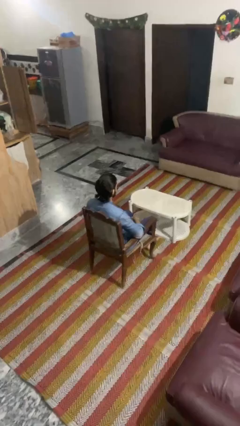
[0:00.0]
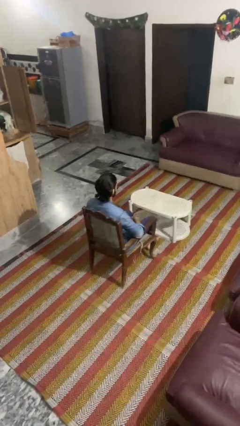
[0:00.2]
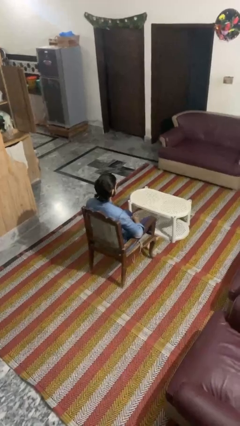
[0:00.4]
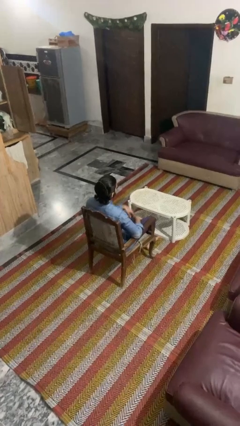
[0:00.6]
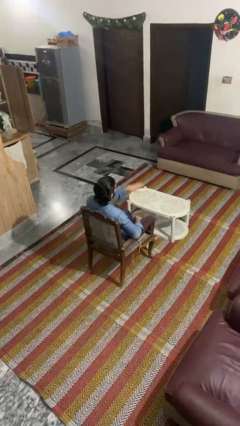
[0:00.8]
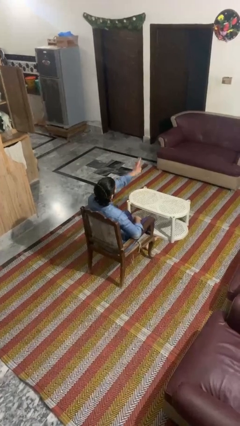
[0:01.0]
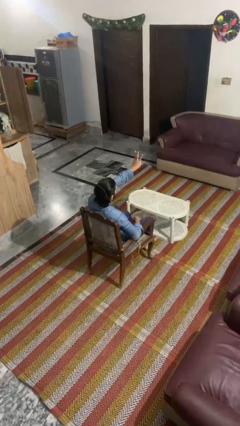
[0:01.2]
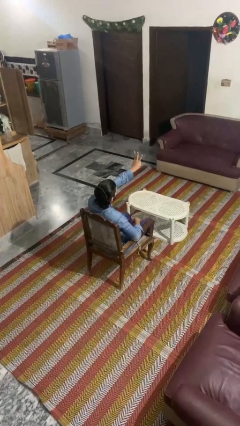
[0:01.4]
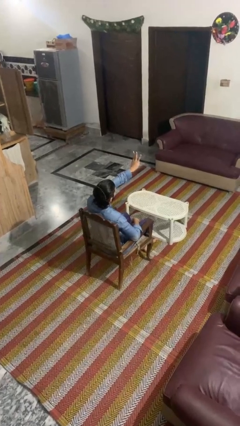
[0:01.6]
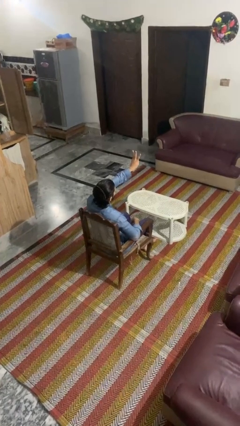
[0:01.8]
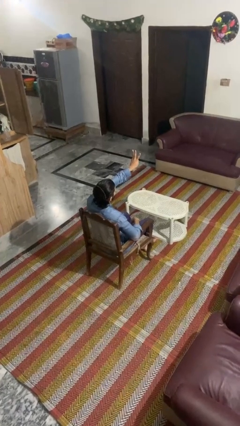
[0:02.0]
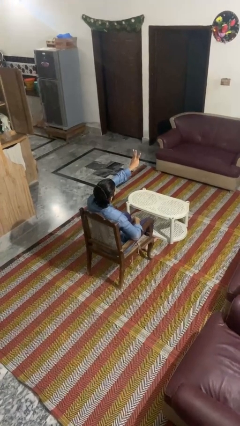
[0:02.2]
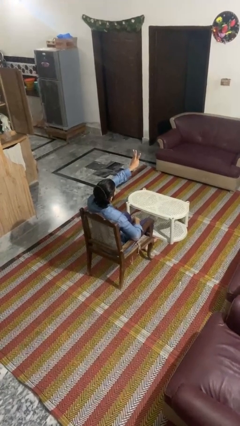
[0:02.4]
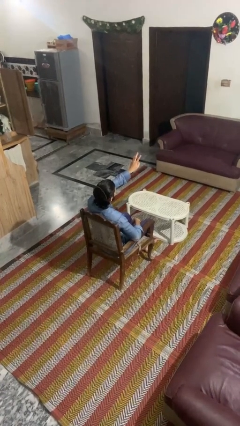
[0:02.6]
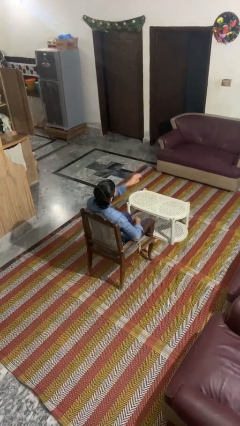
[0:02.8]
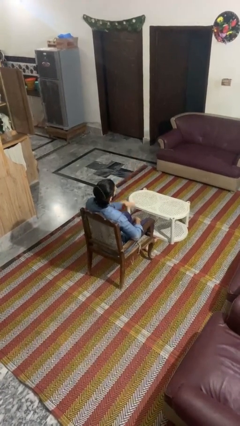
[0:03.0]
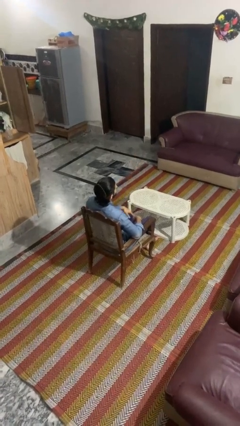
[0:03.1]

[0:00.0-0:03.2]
person gestures number three

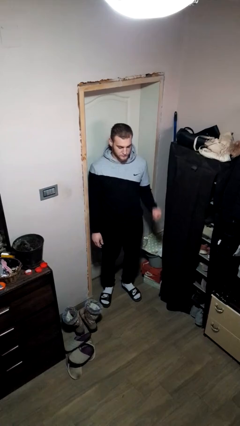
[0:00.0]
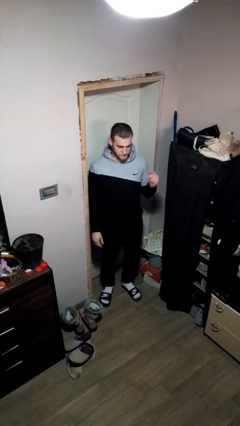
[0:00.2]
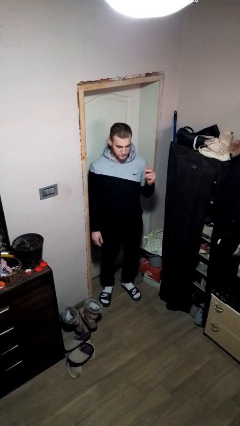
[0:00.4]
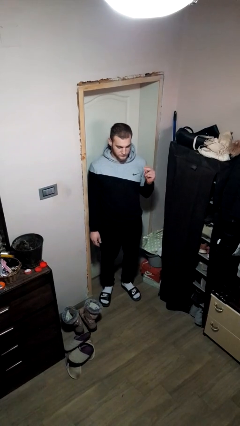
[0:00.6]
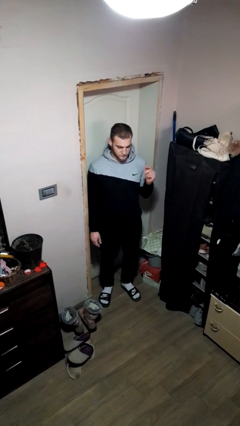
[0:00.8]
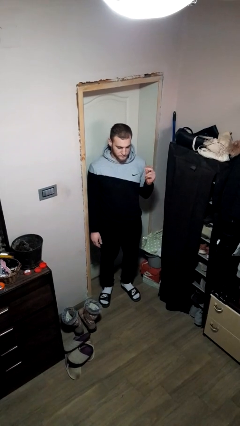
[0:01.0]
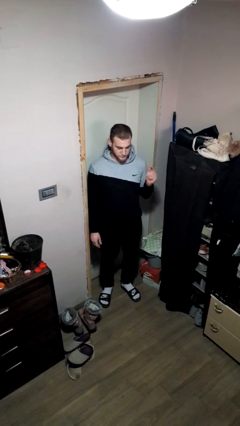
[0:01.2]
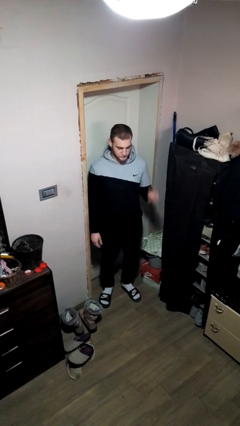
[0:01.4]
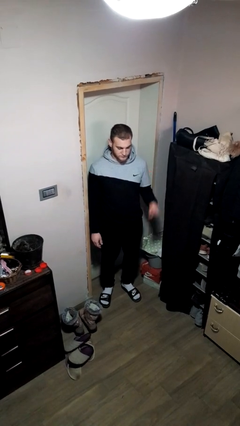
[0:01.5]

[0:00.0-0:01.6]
person snaps fingers

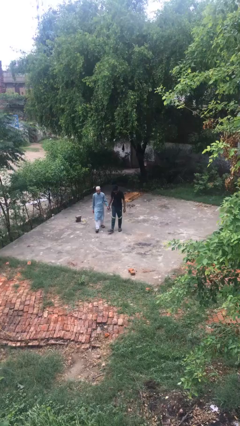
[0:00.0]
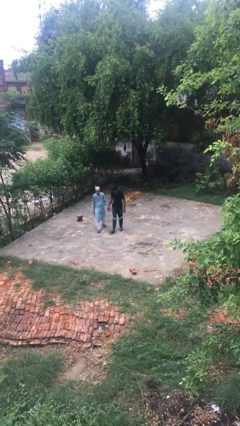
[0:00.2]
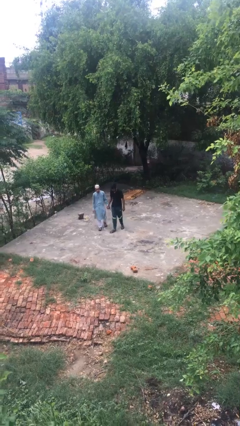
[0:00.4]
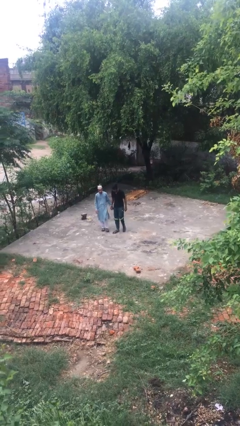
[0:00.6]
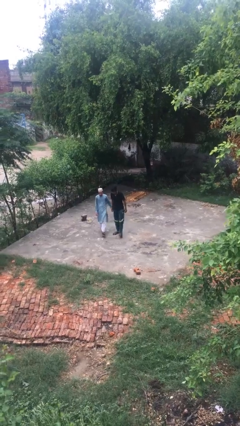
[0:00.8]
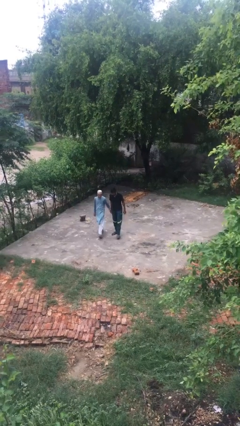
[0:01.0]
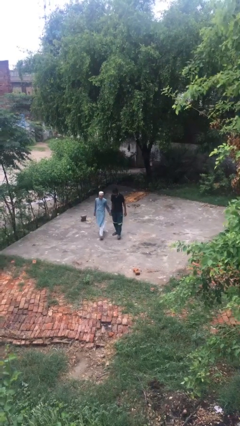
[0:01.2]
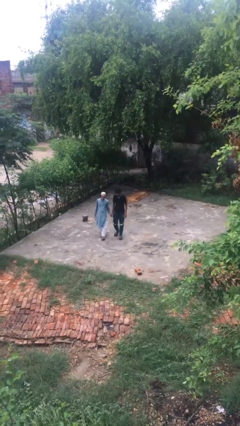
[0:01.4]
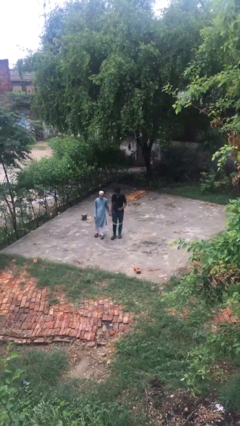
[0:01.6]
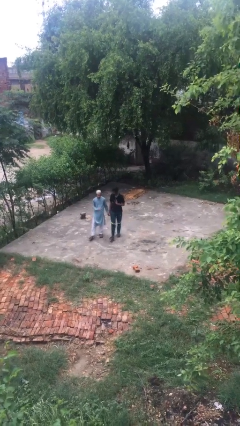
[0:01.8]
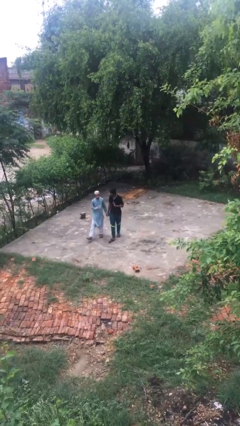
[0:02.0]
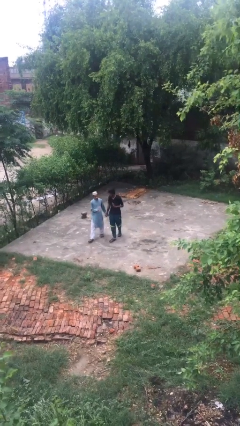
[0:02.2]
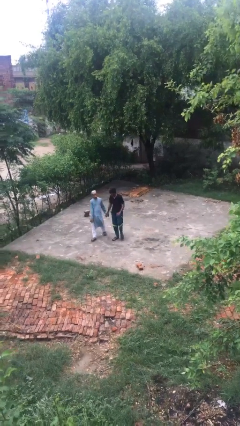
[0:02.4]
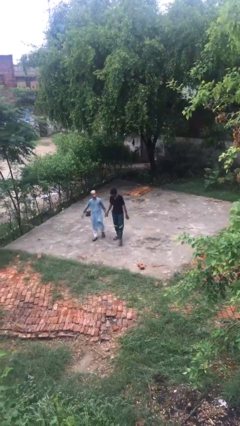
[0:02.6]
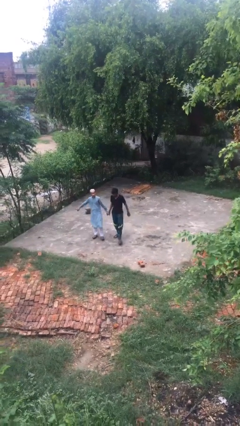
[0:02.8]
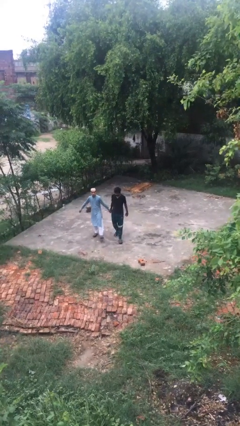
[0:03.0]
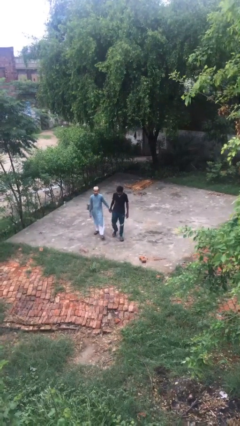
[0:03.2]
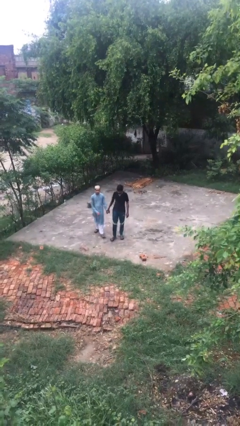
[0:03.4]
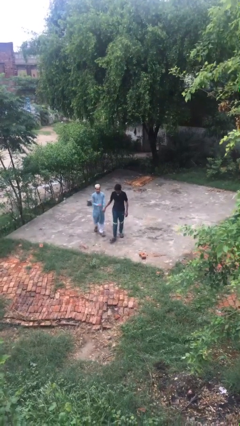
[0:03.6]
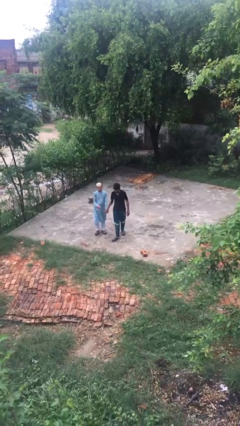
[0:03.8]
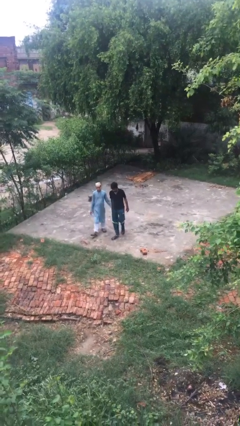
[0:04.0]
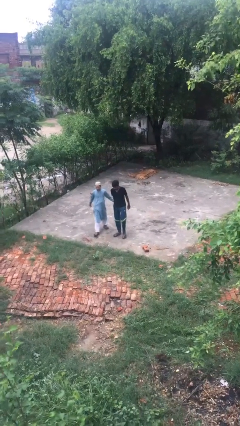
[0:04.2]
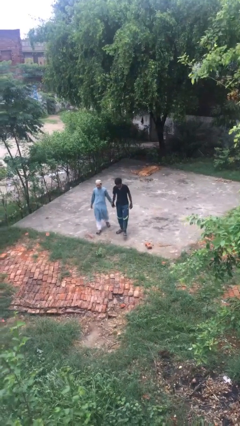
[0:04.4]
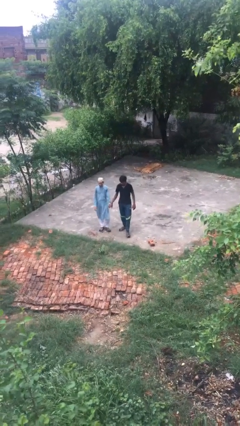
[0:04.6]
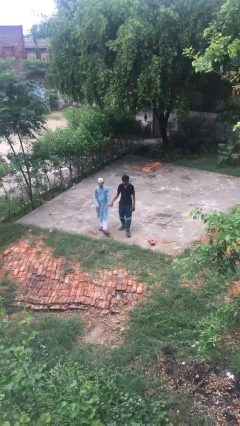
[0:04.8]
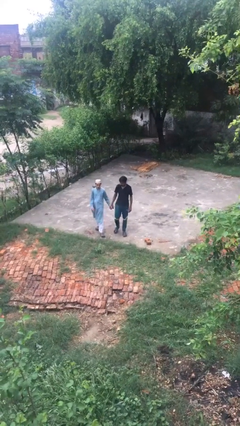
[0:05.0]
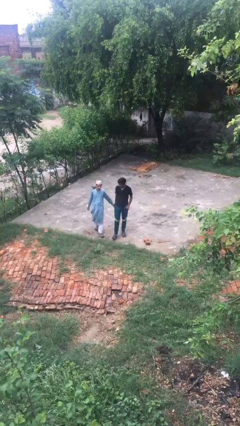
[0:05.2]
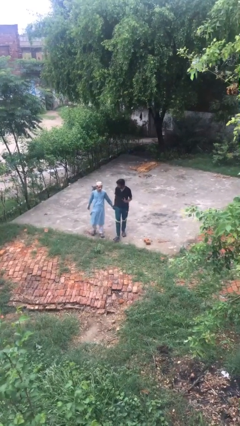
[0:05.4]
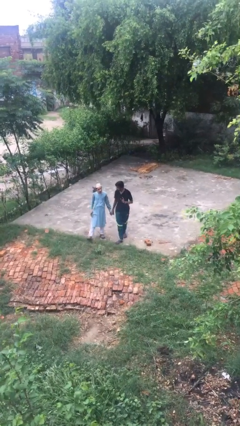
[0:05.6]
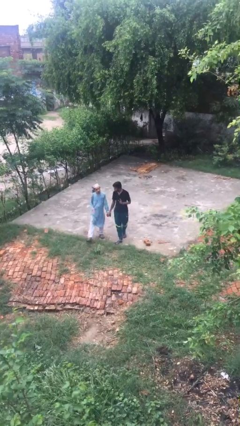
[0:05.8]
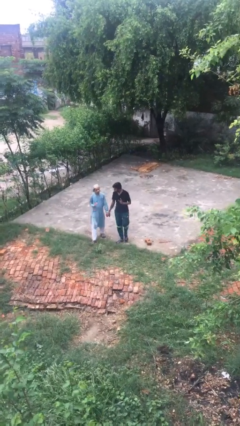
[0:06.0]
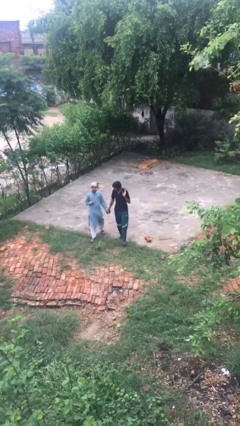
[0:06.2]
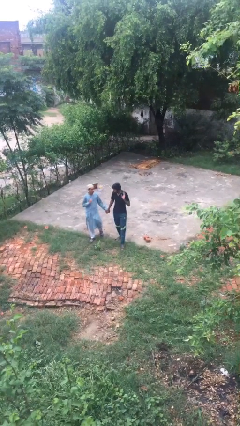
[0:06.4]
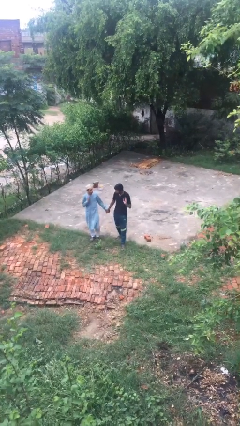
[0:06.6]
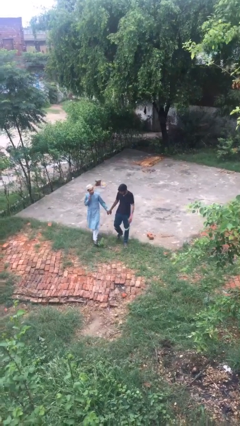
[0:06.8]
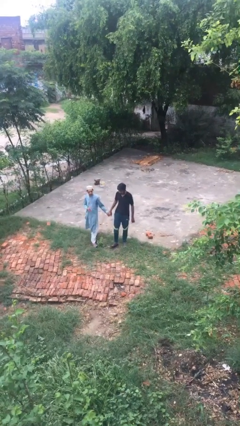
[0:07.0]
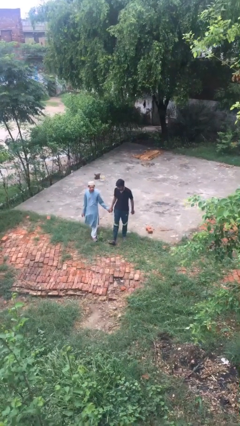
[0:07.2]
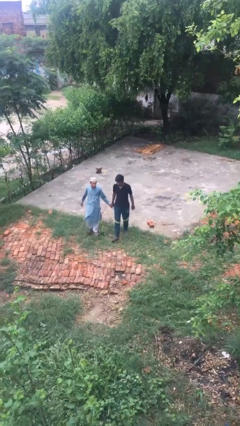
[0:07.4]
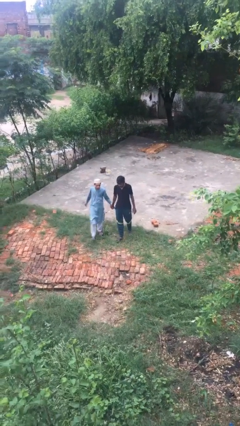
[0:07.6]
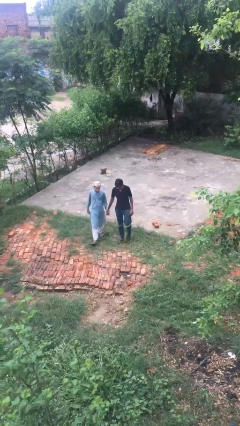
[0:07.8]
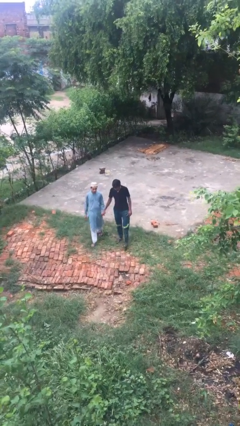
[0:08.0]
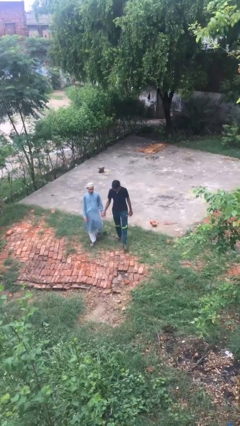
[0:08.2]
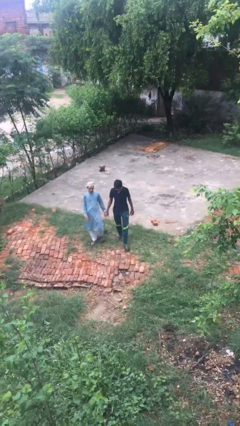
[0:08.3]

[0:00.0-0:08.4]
person holds hand

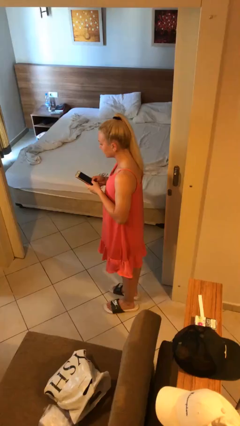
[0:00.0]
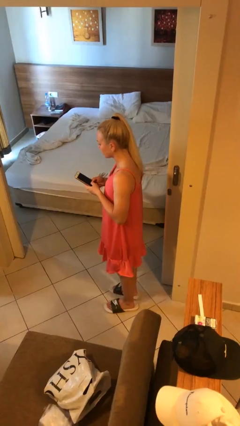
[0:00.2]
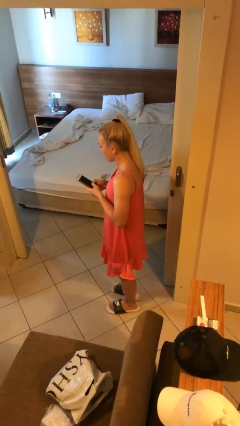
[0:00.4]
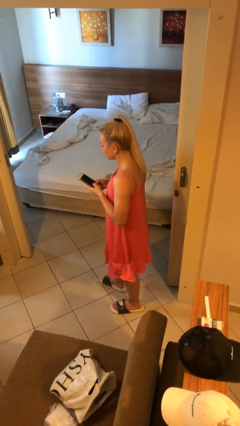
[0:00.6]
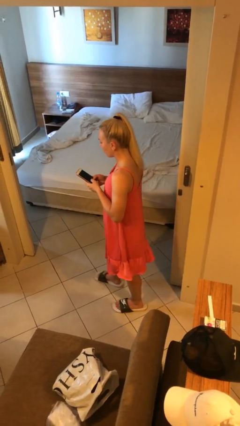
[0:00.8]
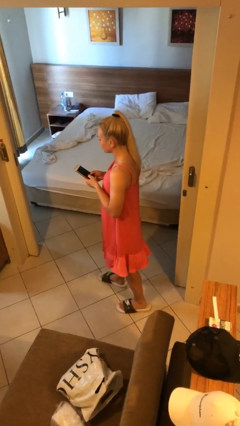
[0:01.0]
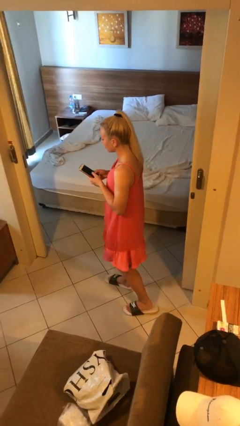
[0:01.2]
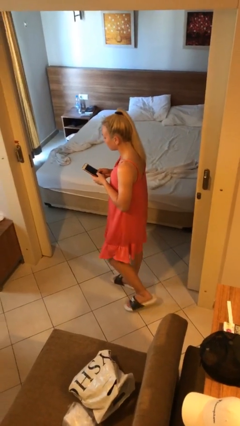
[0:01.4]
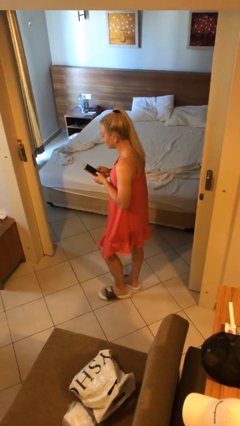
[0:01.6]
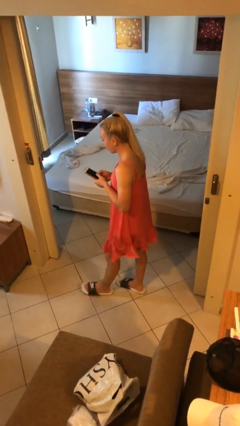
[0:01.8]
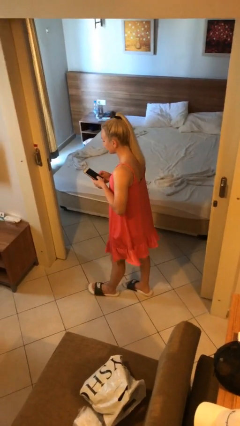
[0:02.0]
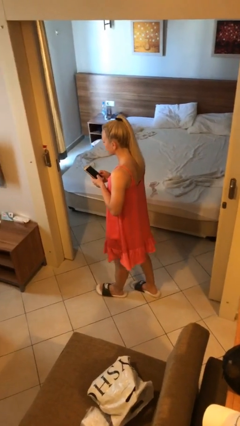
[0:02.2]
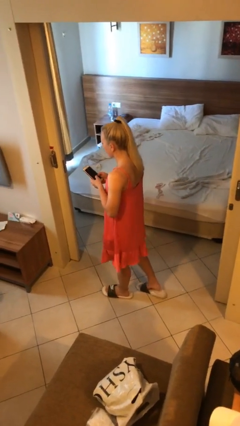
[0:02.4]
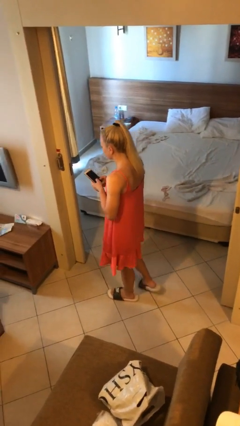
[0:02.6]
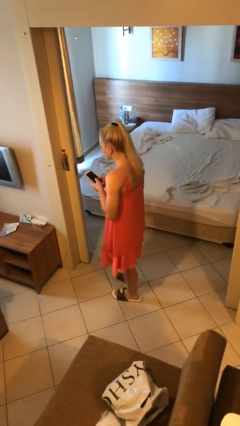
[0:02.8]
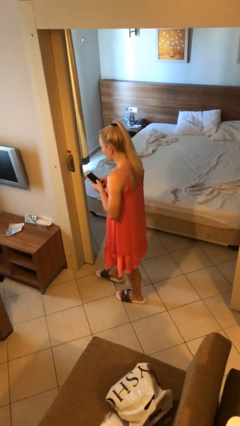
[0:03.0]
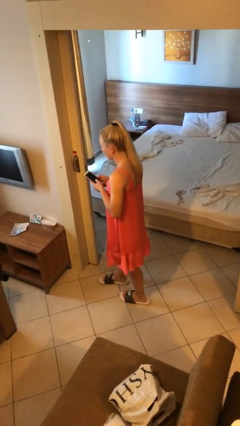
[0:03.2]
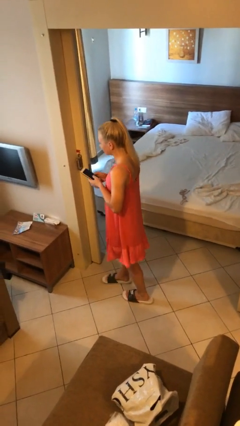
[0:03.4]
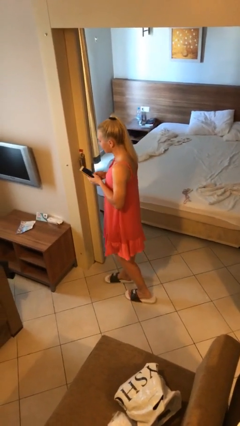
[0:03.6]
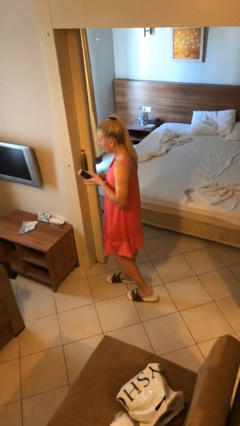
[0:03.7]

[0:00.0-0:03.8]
person texts on phone

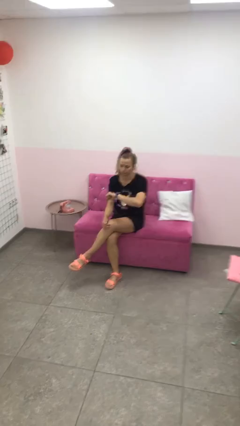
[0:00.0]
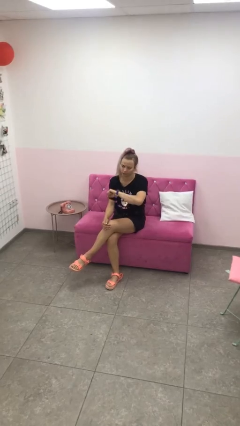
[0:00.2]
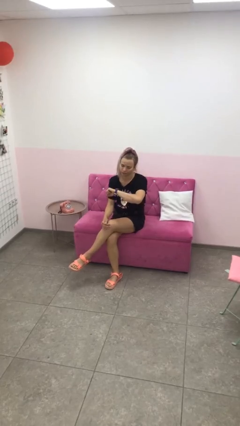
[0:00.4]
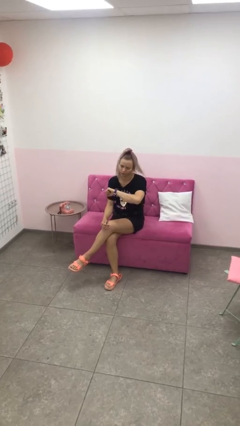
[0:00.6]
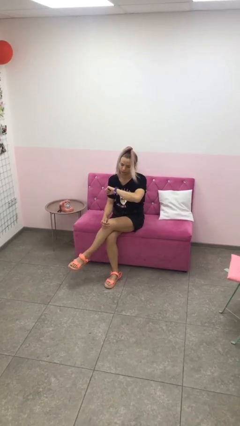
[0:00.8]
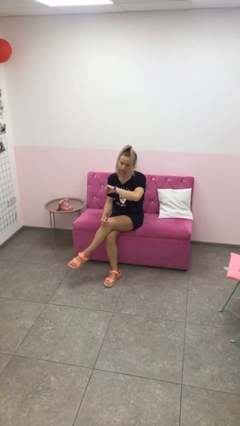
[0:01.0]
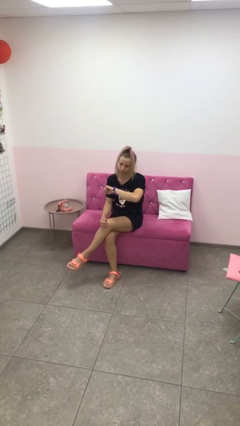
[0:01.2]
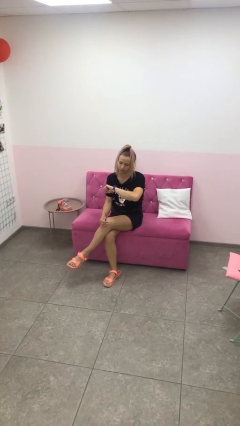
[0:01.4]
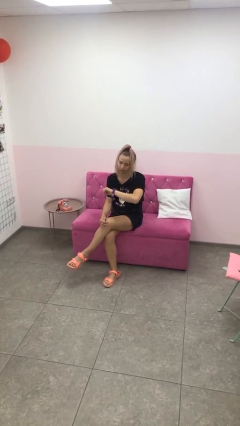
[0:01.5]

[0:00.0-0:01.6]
person looks at wristwatch
